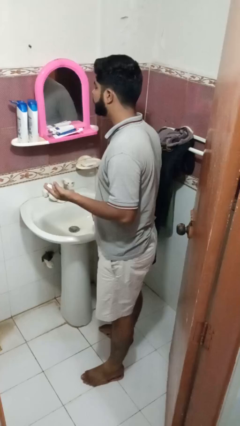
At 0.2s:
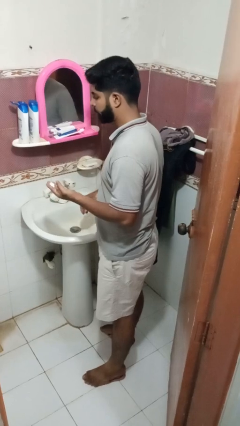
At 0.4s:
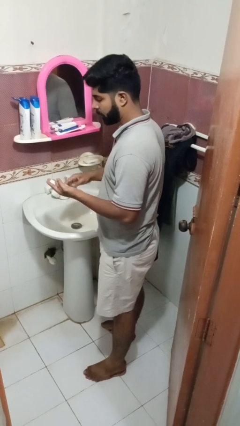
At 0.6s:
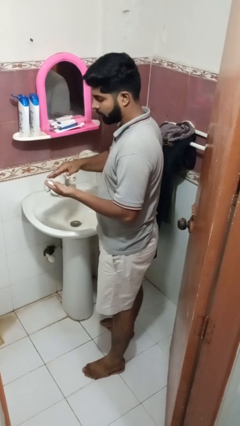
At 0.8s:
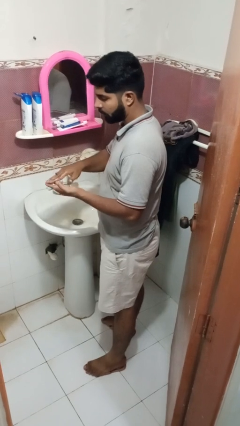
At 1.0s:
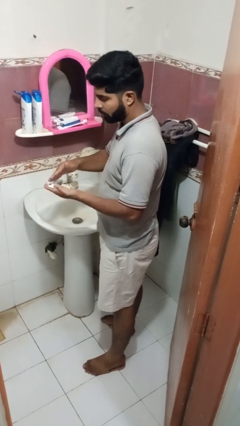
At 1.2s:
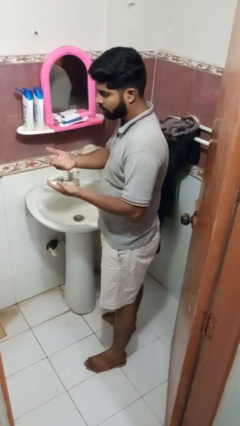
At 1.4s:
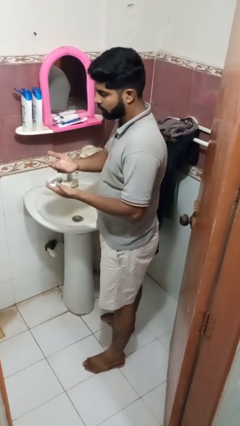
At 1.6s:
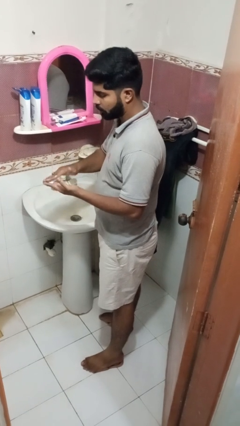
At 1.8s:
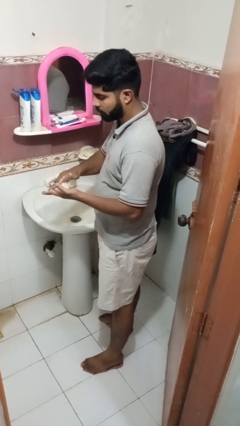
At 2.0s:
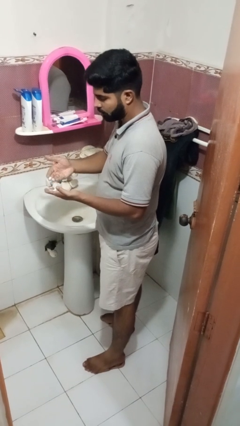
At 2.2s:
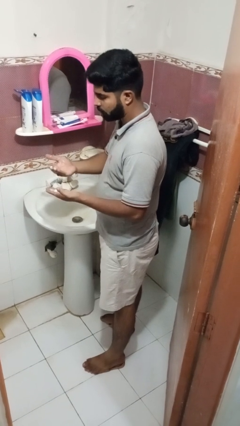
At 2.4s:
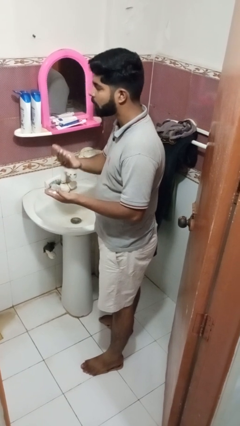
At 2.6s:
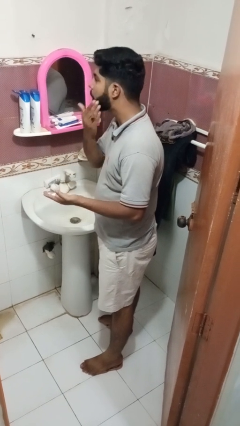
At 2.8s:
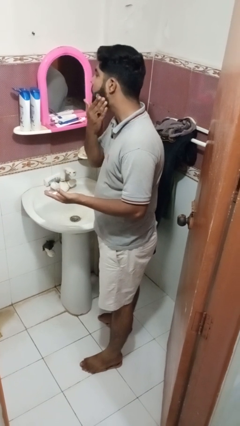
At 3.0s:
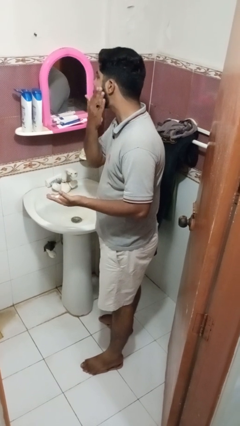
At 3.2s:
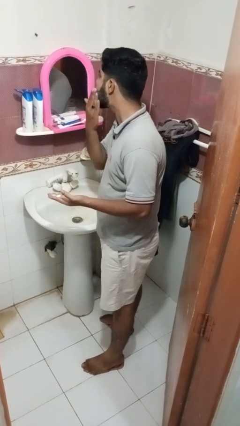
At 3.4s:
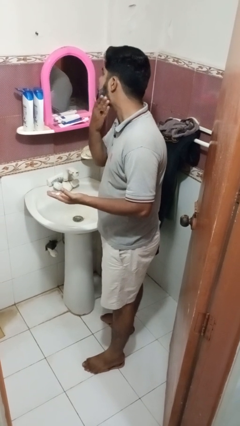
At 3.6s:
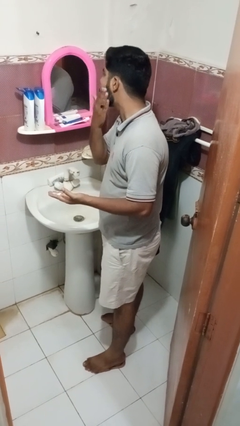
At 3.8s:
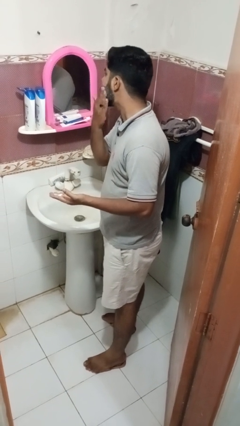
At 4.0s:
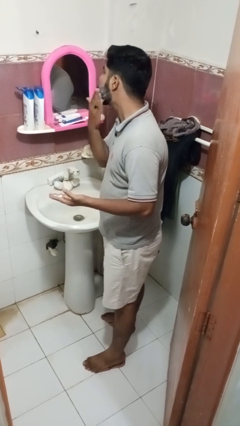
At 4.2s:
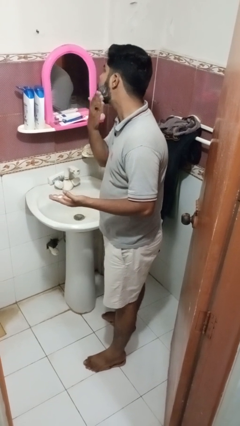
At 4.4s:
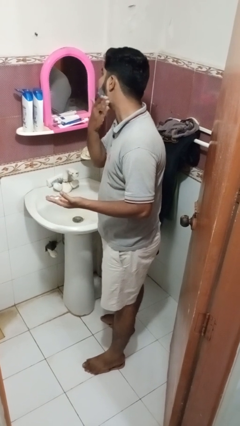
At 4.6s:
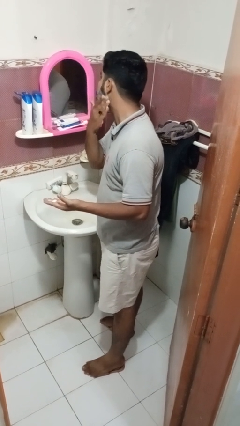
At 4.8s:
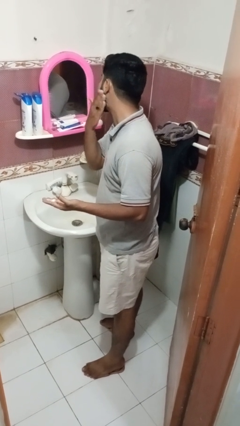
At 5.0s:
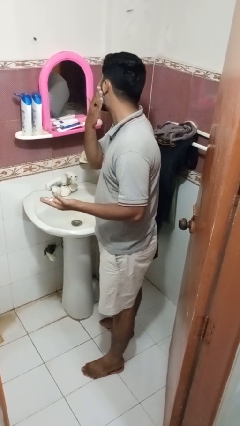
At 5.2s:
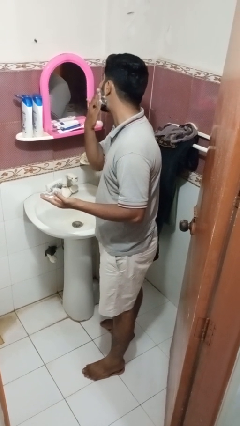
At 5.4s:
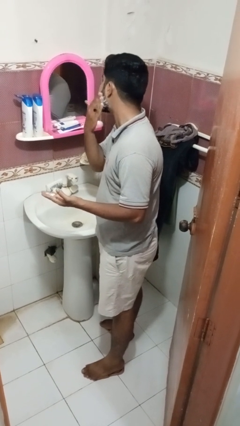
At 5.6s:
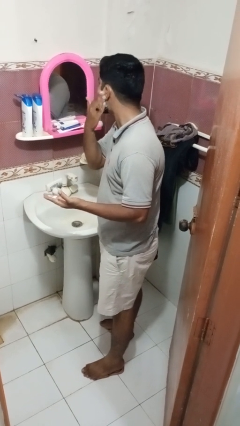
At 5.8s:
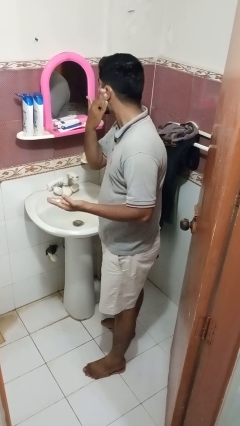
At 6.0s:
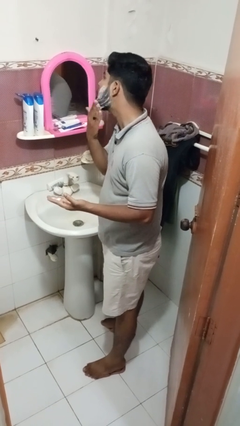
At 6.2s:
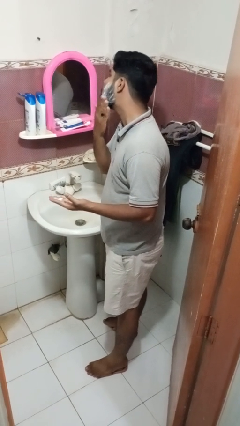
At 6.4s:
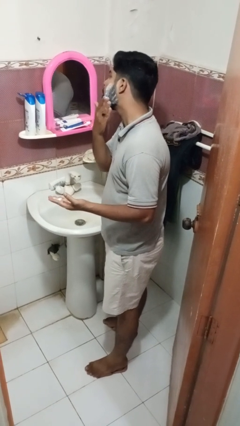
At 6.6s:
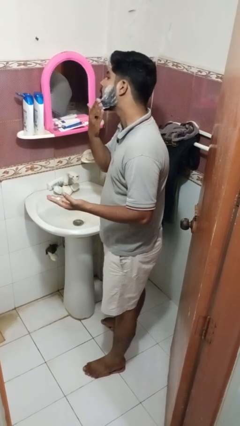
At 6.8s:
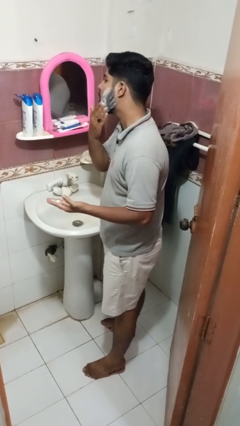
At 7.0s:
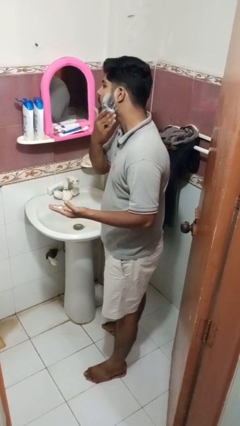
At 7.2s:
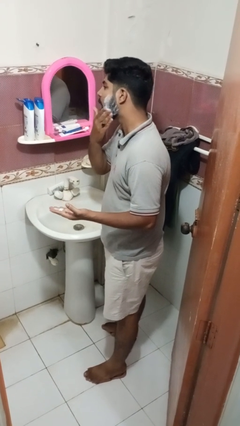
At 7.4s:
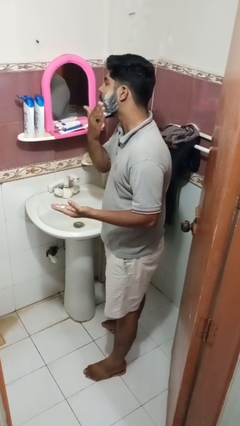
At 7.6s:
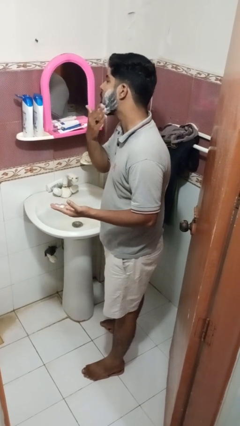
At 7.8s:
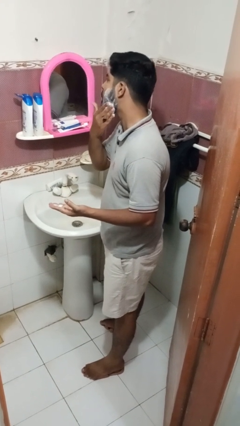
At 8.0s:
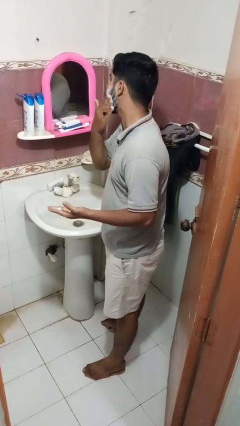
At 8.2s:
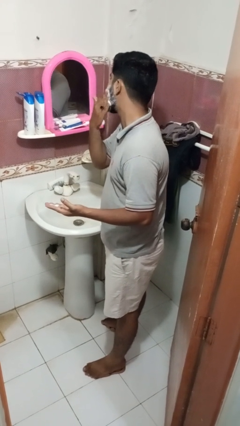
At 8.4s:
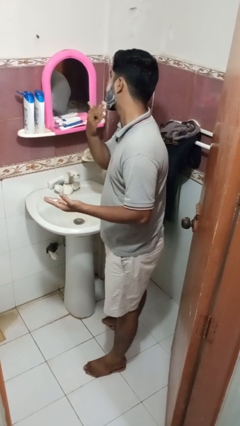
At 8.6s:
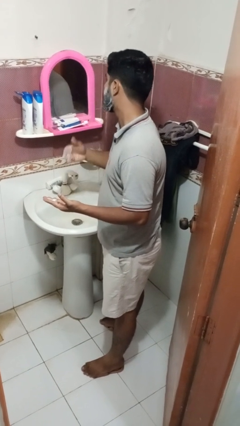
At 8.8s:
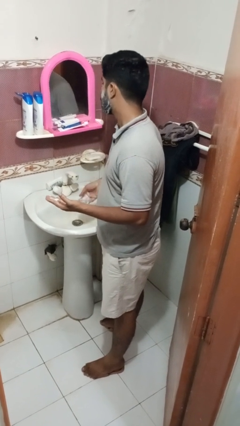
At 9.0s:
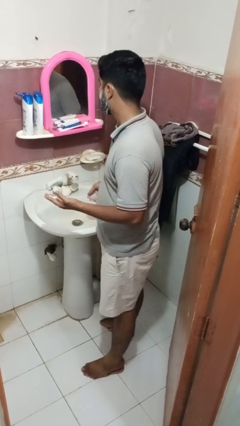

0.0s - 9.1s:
person applies shaving cream

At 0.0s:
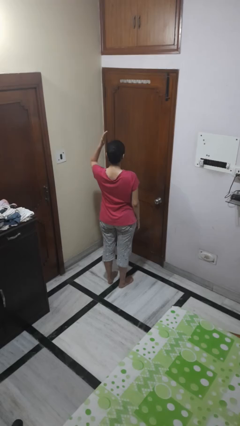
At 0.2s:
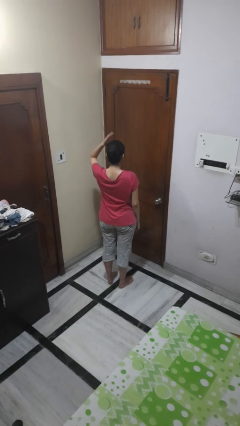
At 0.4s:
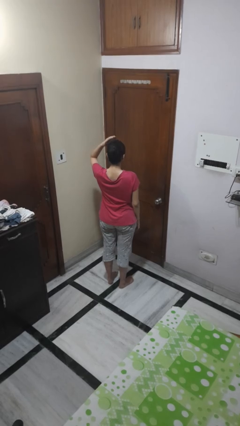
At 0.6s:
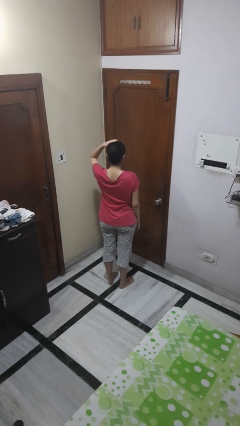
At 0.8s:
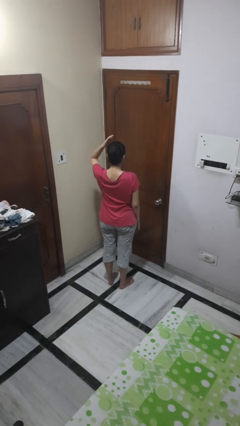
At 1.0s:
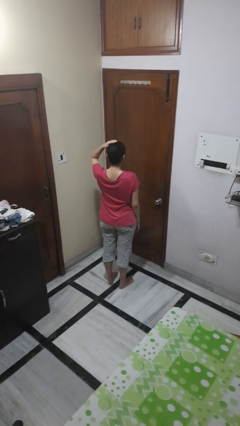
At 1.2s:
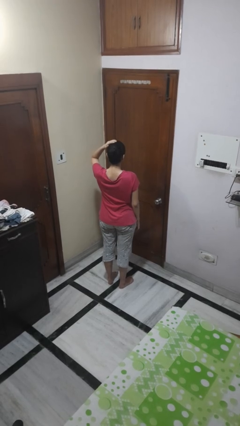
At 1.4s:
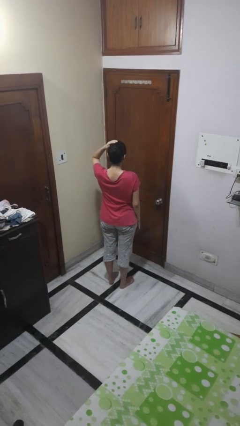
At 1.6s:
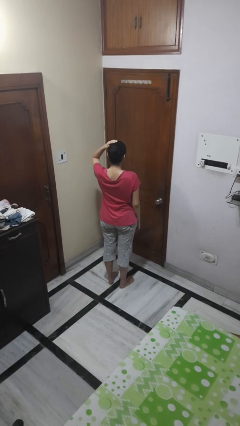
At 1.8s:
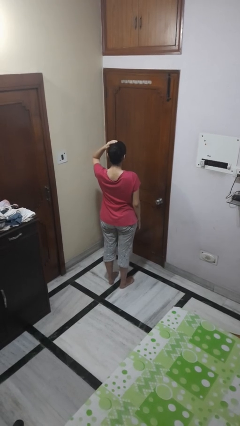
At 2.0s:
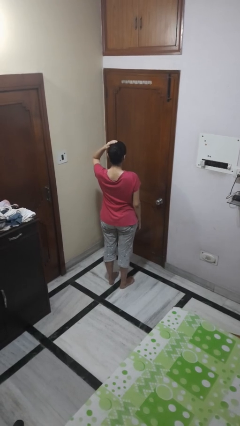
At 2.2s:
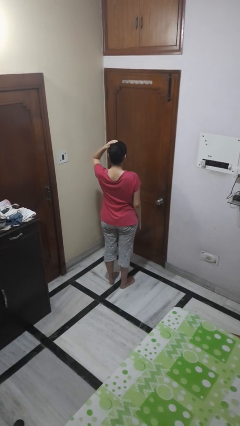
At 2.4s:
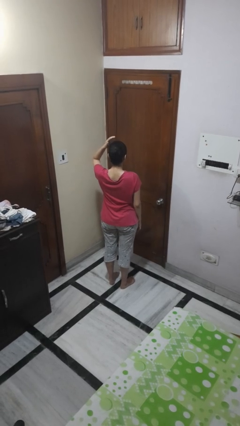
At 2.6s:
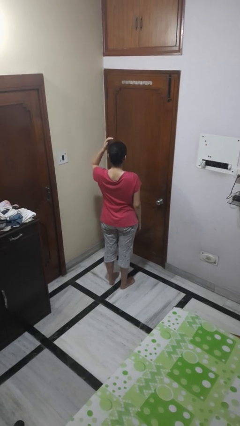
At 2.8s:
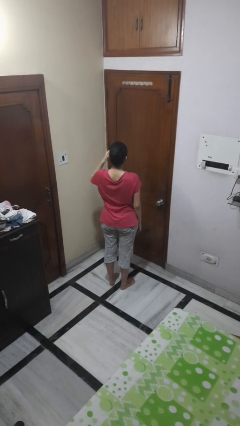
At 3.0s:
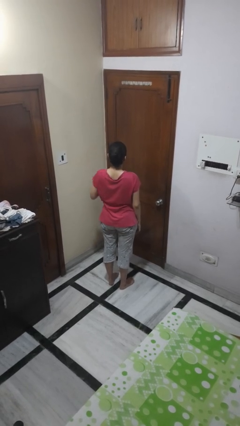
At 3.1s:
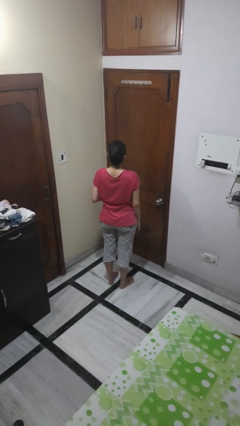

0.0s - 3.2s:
person pats head

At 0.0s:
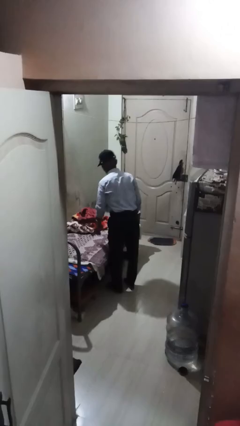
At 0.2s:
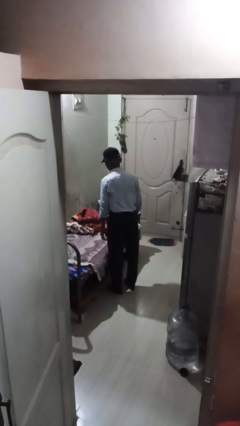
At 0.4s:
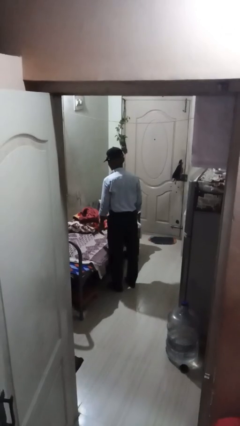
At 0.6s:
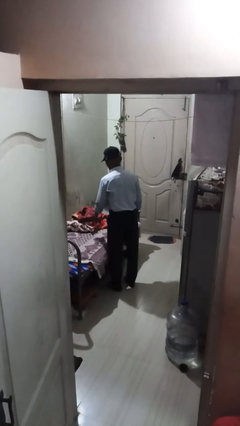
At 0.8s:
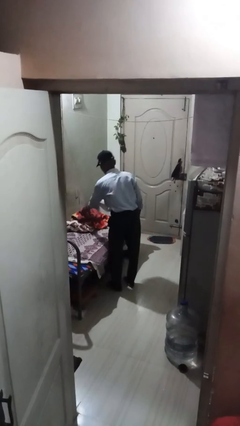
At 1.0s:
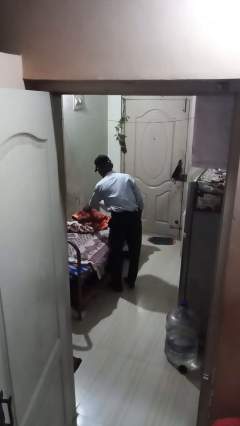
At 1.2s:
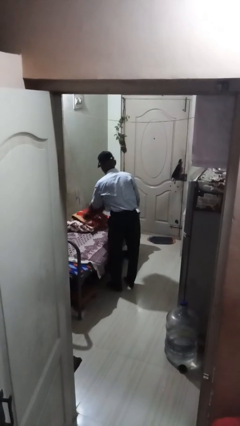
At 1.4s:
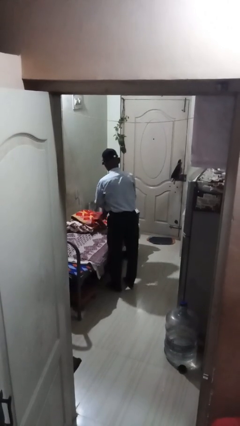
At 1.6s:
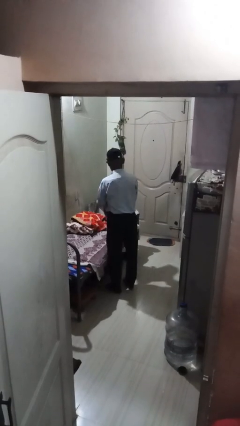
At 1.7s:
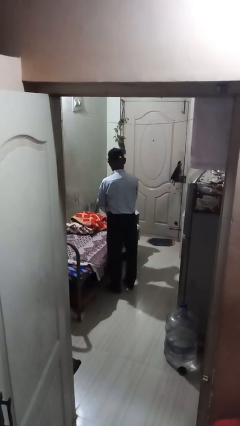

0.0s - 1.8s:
person folds shirt

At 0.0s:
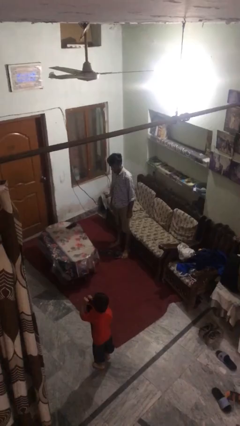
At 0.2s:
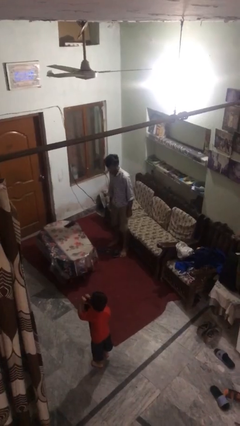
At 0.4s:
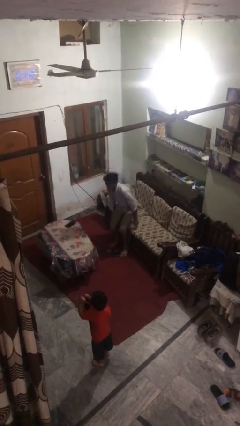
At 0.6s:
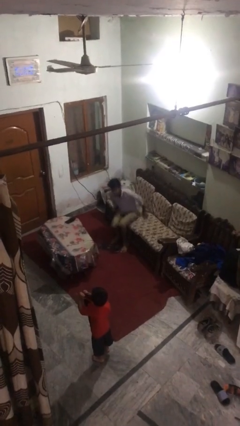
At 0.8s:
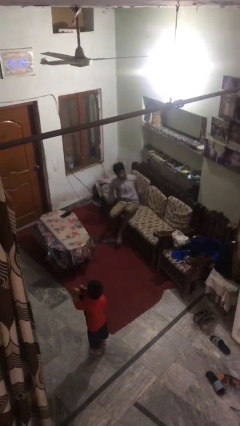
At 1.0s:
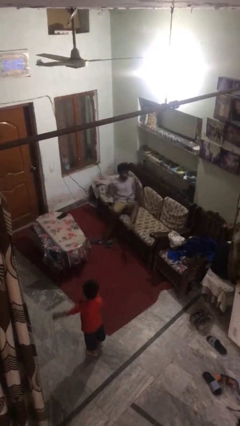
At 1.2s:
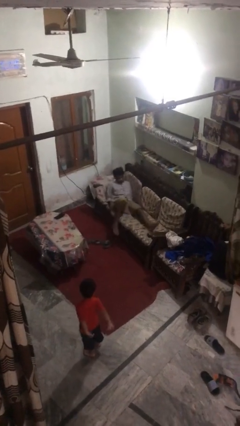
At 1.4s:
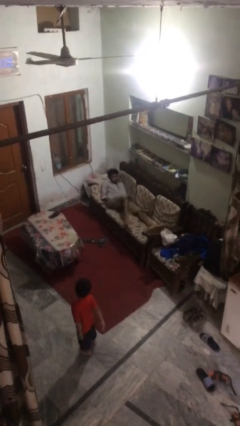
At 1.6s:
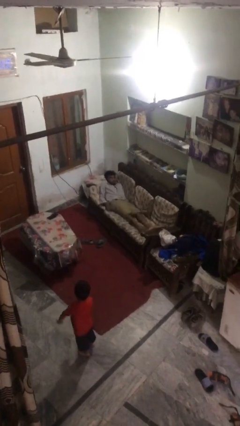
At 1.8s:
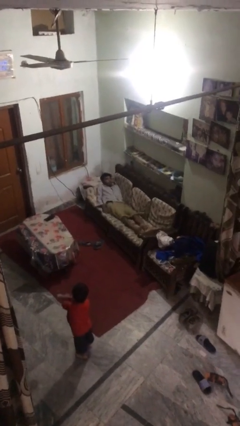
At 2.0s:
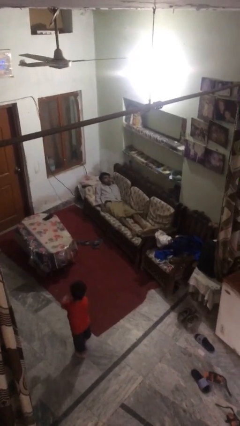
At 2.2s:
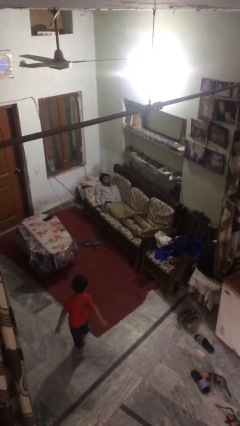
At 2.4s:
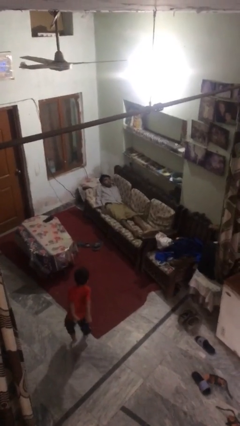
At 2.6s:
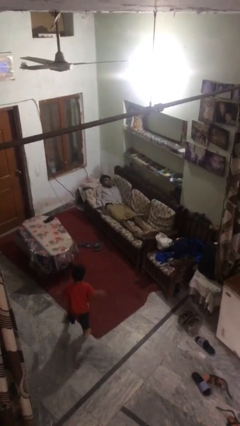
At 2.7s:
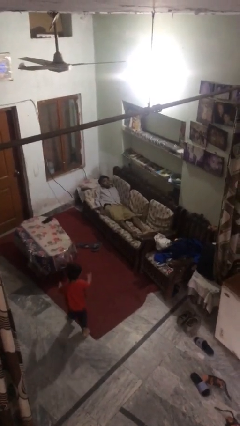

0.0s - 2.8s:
person lies down on couch

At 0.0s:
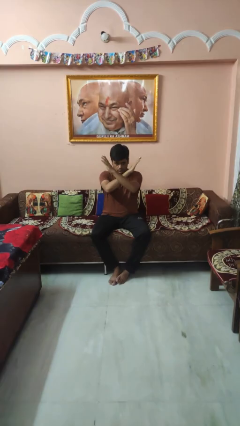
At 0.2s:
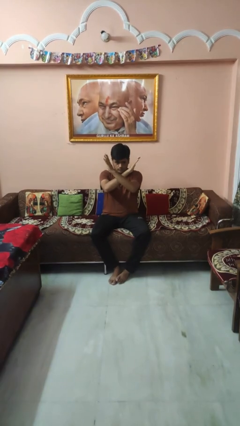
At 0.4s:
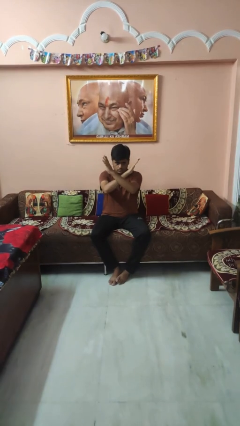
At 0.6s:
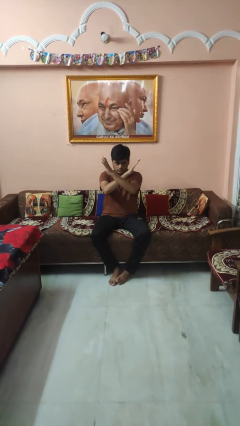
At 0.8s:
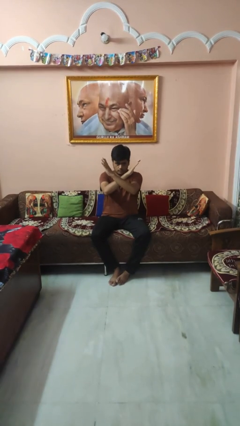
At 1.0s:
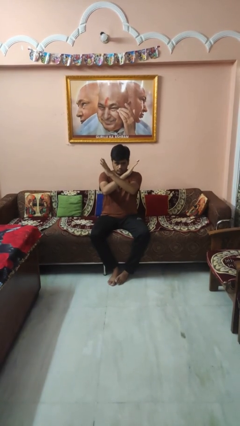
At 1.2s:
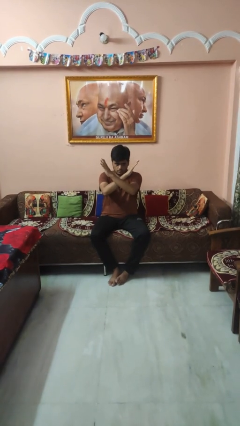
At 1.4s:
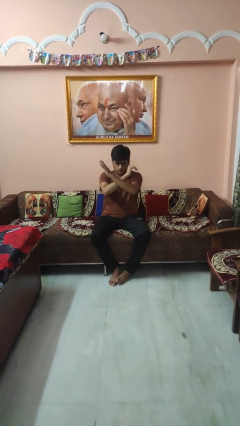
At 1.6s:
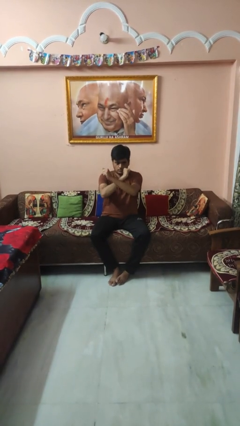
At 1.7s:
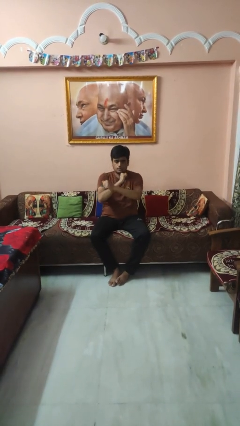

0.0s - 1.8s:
person gestures arms x
